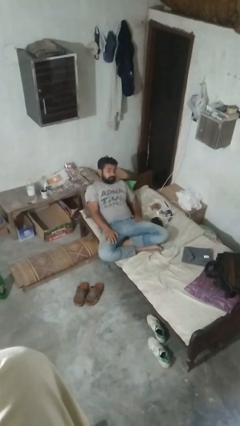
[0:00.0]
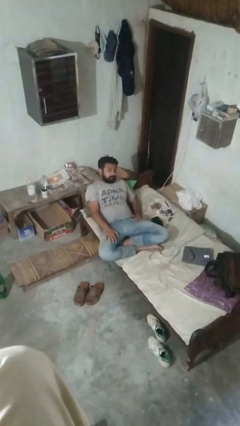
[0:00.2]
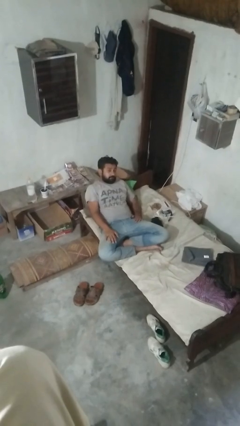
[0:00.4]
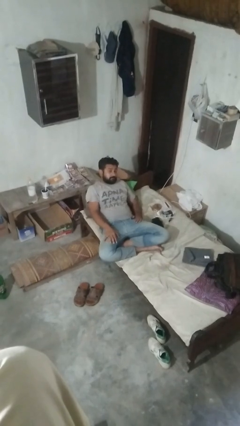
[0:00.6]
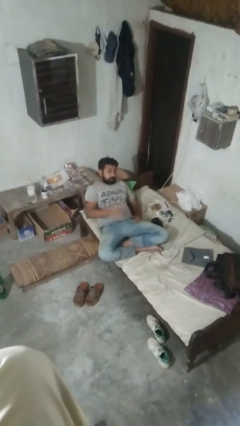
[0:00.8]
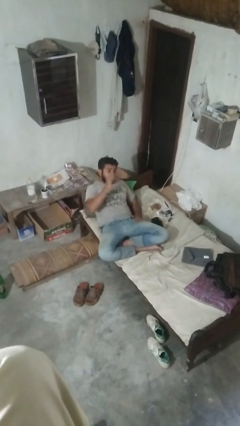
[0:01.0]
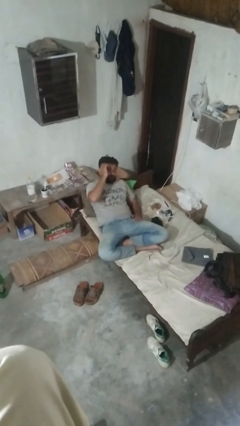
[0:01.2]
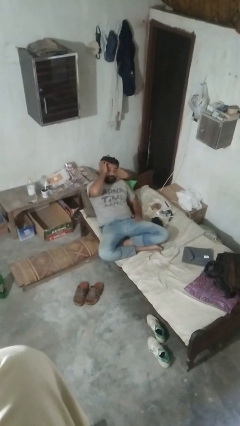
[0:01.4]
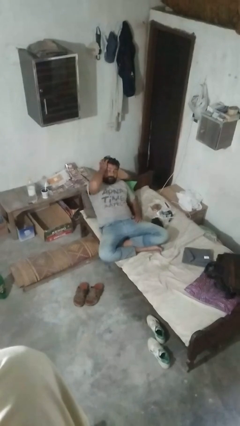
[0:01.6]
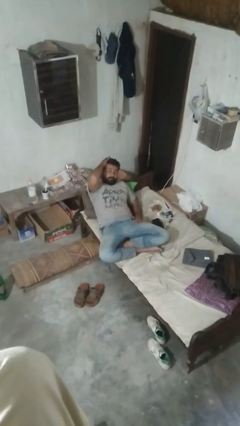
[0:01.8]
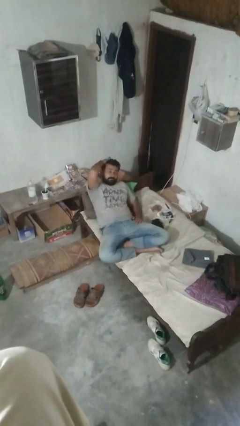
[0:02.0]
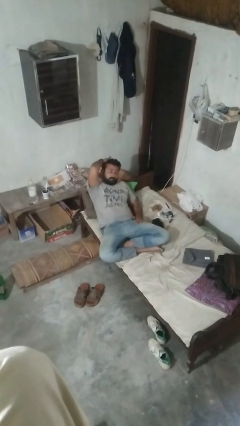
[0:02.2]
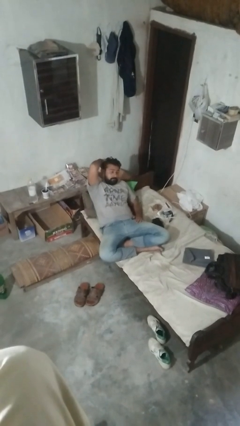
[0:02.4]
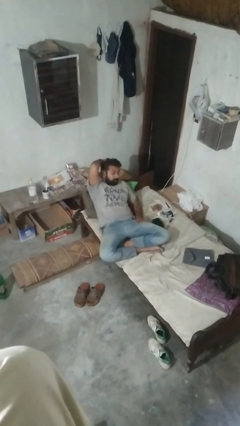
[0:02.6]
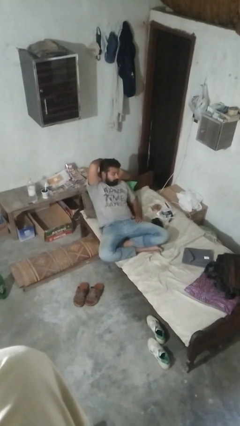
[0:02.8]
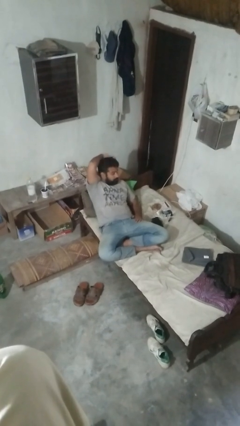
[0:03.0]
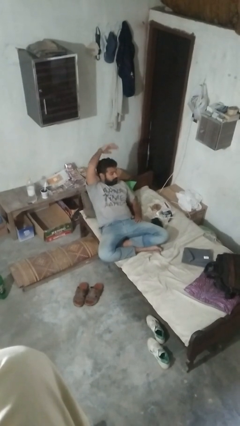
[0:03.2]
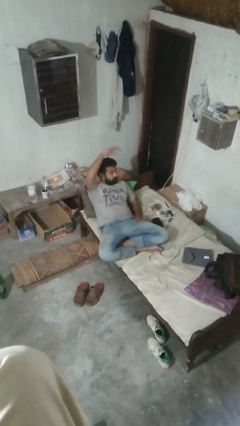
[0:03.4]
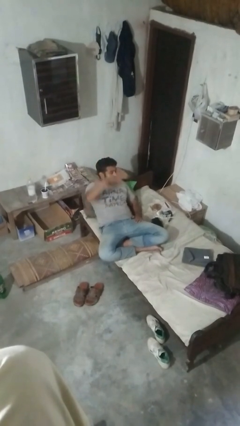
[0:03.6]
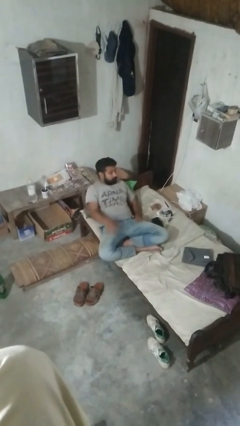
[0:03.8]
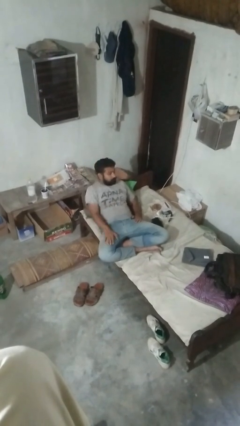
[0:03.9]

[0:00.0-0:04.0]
person strokes hair

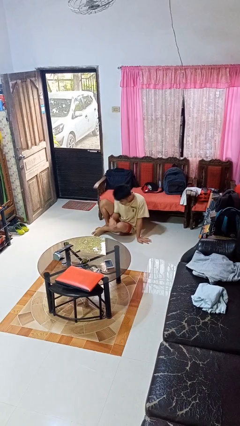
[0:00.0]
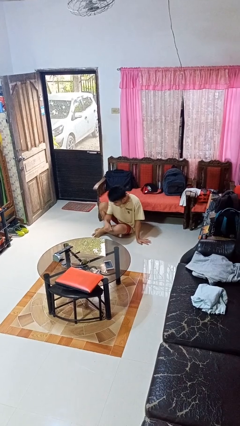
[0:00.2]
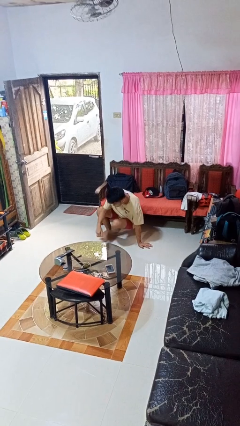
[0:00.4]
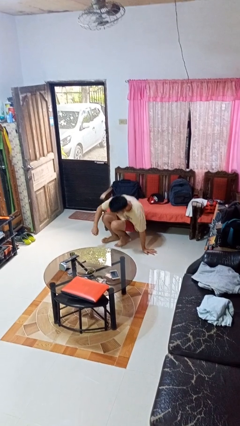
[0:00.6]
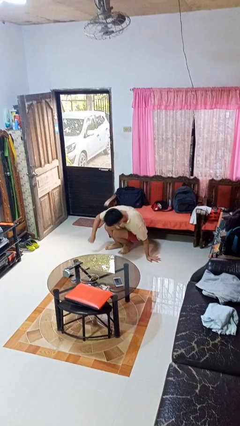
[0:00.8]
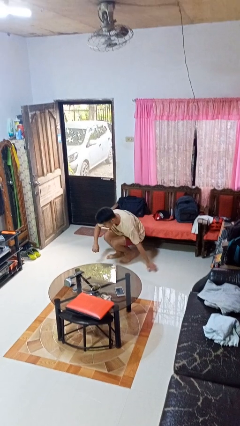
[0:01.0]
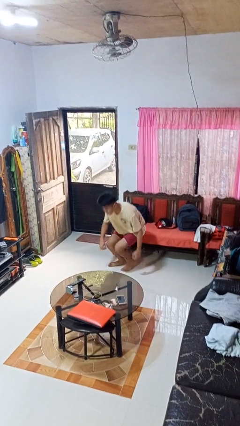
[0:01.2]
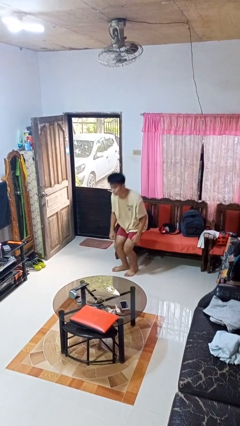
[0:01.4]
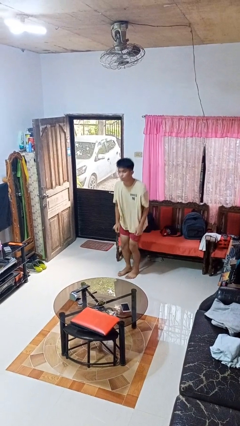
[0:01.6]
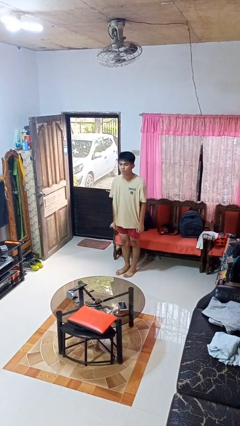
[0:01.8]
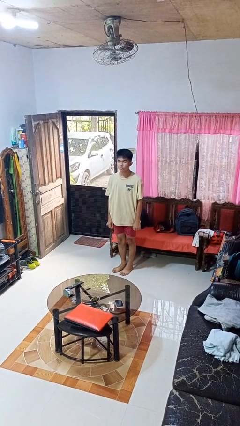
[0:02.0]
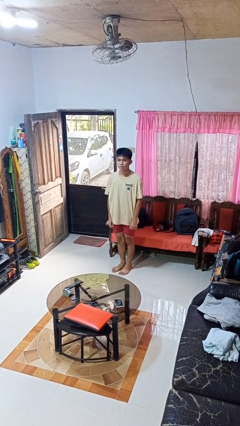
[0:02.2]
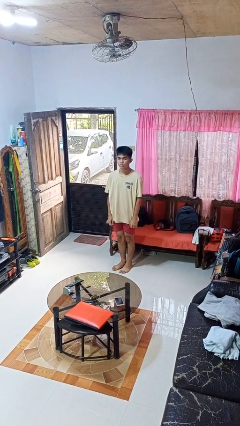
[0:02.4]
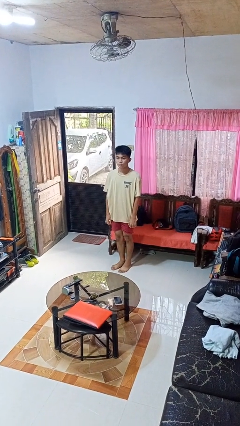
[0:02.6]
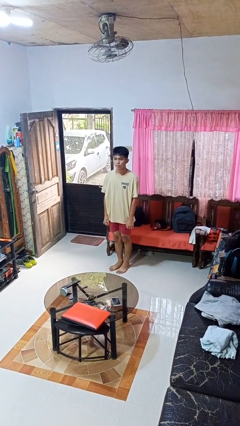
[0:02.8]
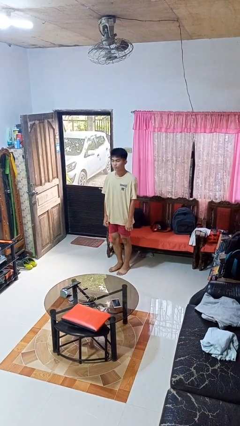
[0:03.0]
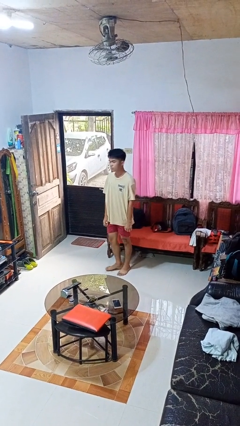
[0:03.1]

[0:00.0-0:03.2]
person stands up from floor

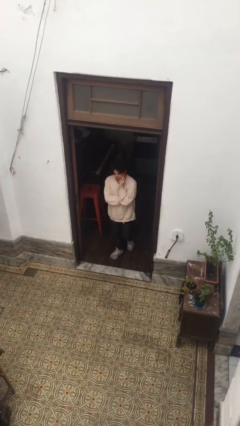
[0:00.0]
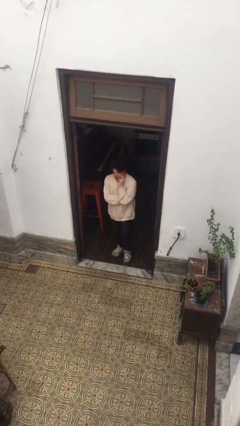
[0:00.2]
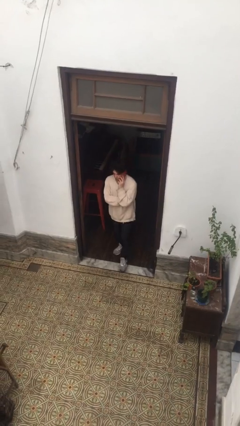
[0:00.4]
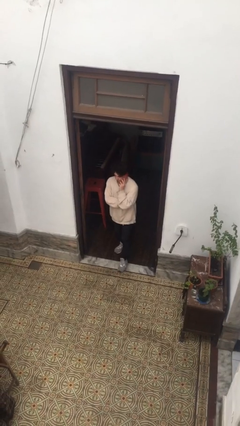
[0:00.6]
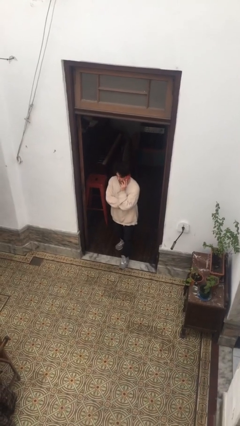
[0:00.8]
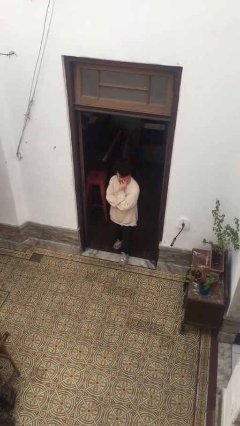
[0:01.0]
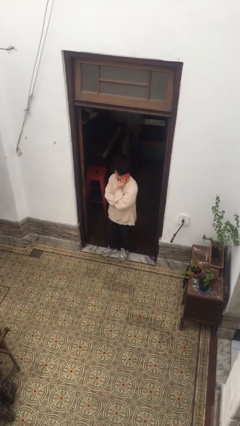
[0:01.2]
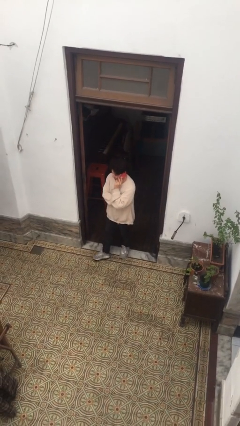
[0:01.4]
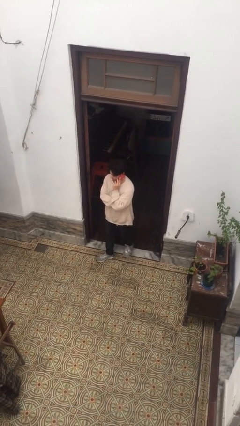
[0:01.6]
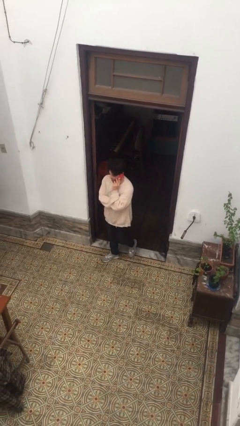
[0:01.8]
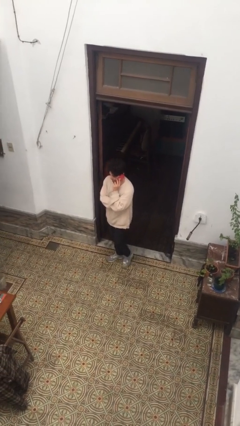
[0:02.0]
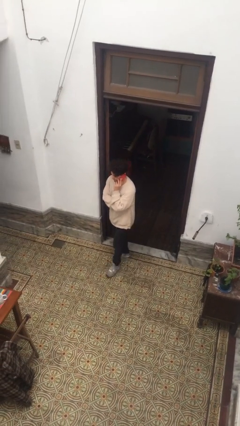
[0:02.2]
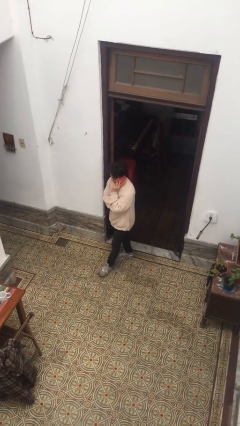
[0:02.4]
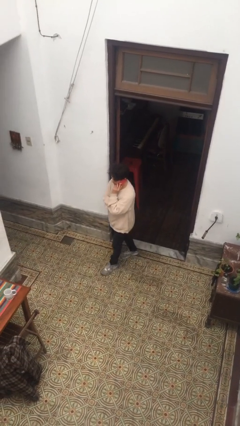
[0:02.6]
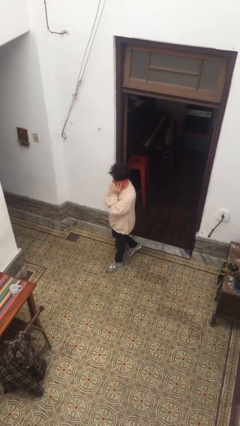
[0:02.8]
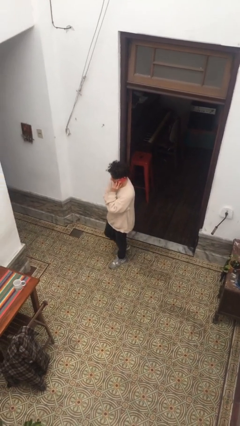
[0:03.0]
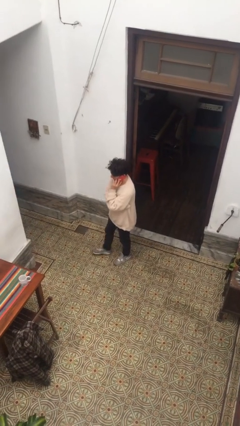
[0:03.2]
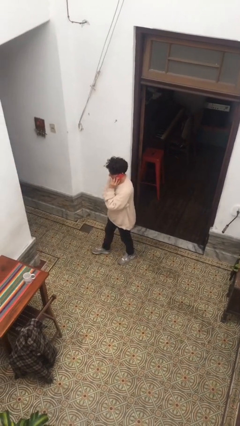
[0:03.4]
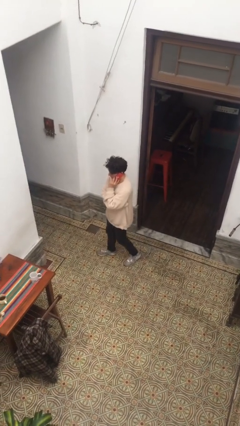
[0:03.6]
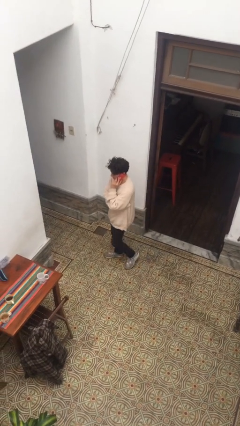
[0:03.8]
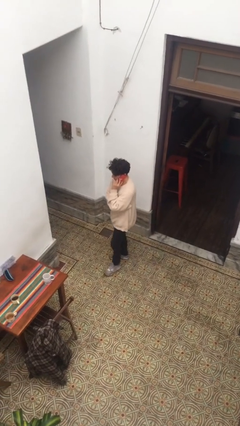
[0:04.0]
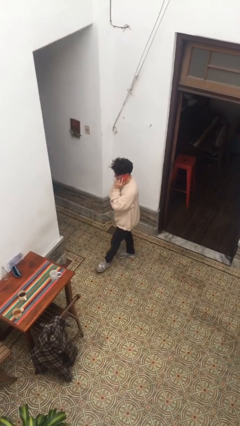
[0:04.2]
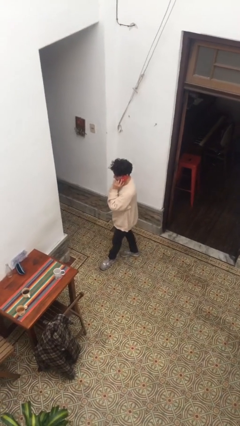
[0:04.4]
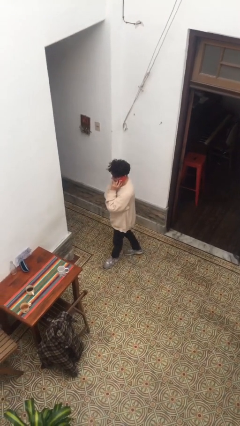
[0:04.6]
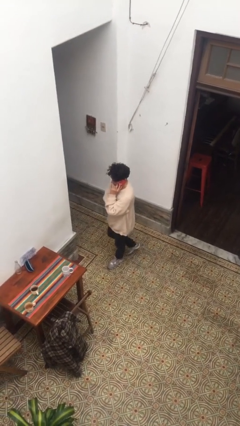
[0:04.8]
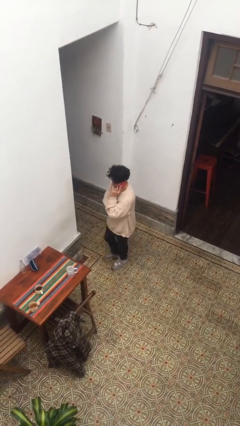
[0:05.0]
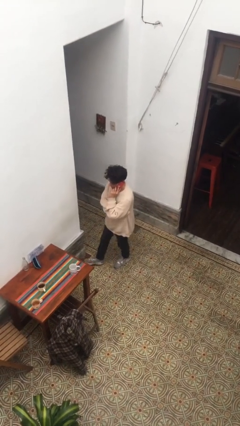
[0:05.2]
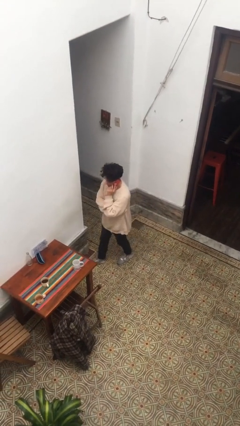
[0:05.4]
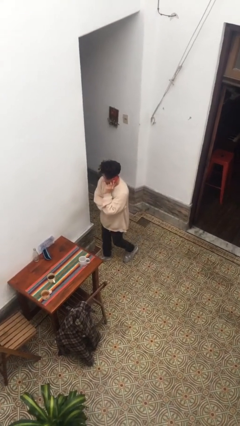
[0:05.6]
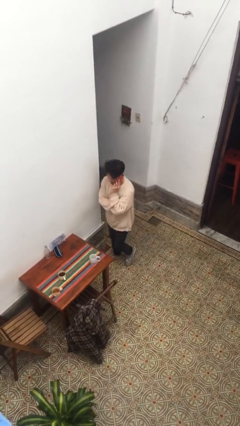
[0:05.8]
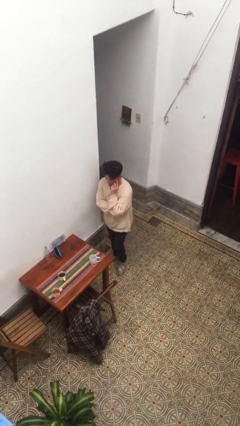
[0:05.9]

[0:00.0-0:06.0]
person enters scene through structure

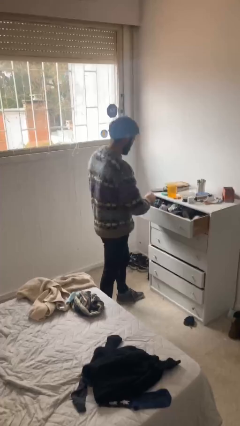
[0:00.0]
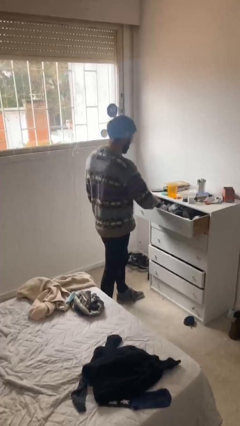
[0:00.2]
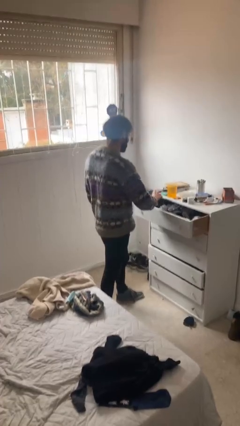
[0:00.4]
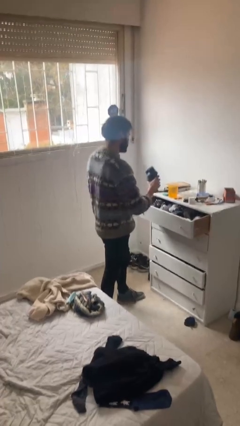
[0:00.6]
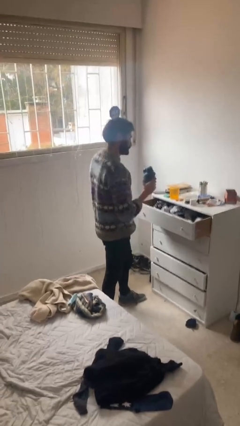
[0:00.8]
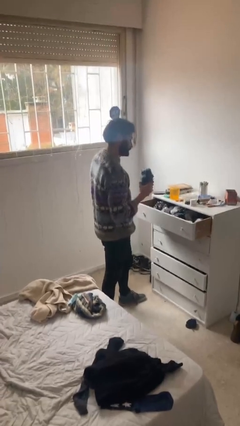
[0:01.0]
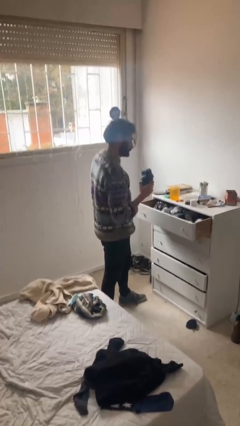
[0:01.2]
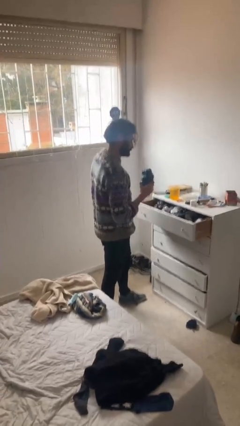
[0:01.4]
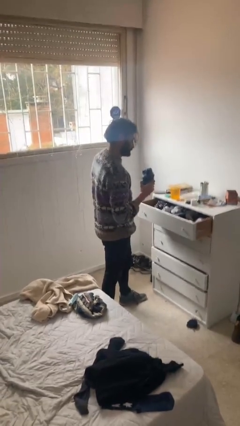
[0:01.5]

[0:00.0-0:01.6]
person takes clothes from dresser

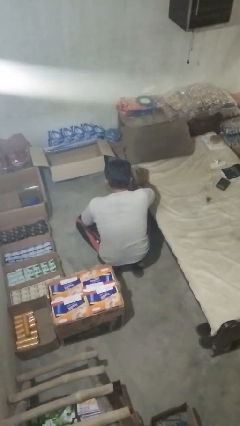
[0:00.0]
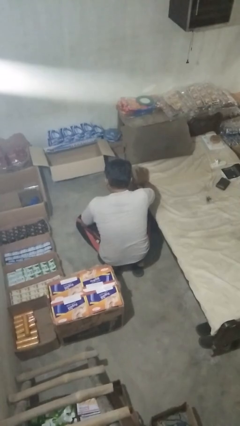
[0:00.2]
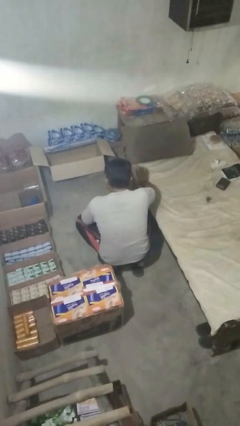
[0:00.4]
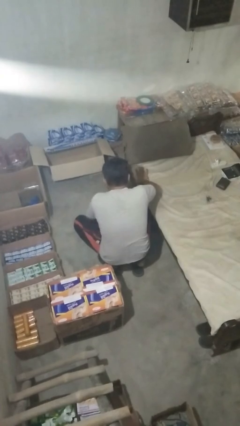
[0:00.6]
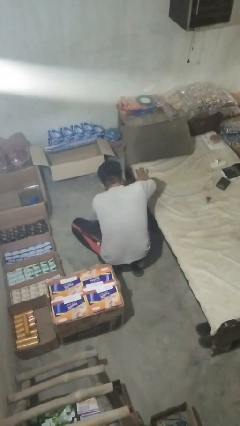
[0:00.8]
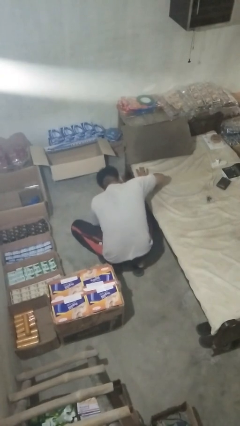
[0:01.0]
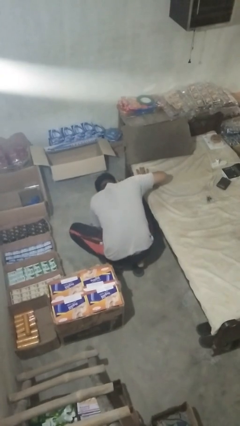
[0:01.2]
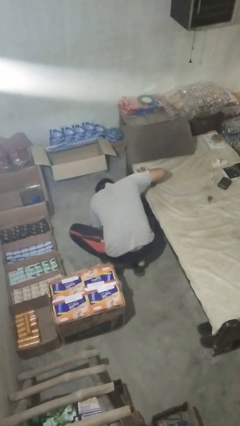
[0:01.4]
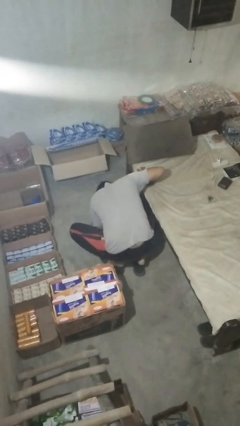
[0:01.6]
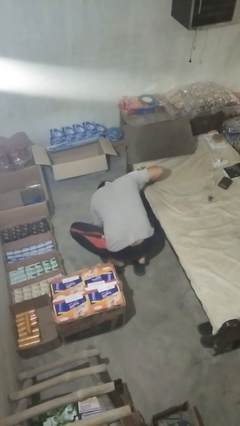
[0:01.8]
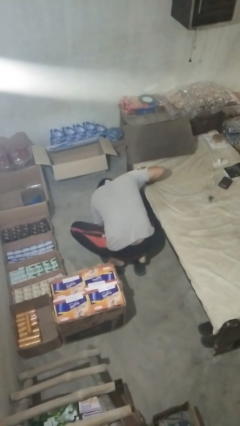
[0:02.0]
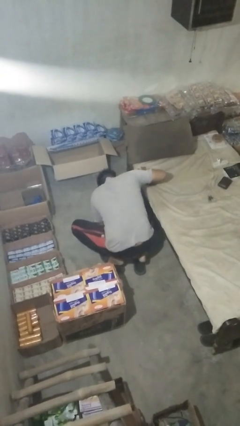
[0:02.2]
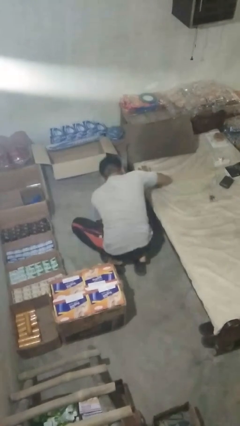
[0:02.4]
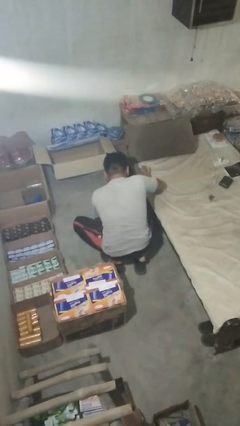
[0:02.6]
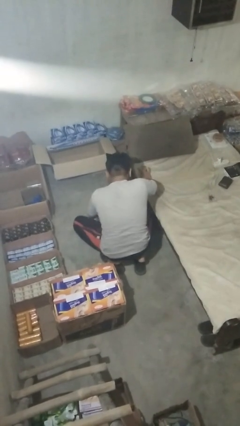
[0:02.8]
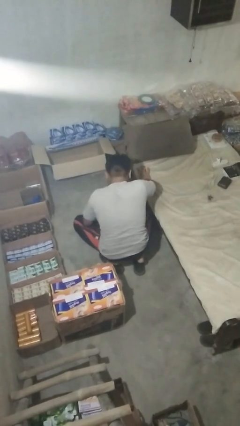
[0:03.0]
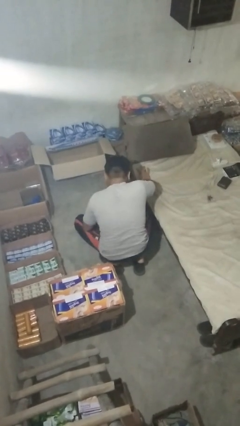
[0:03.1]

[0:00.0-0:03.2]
person searches under bed
